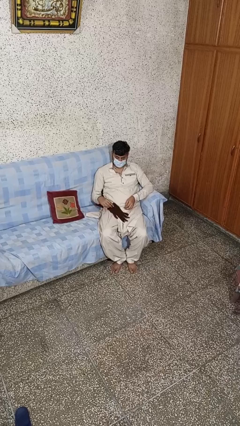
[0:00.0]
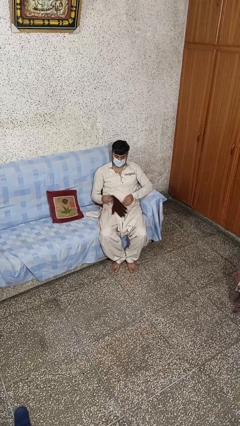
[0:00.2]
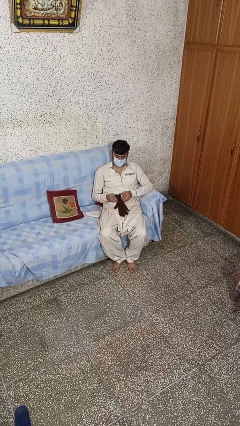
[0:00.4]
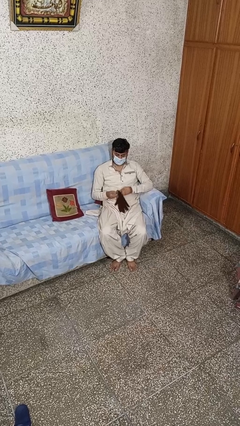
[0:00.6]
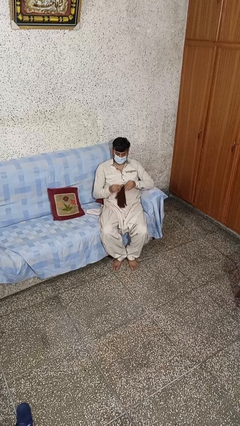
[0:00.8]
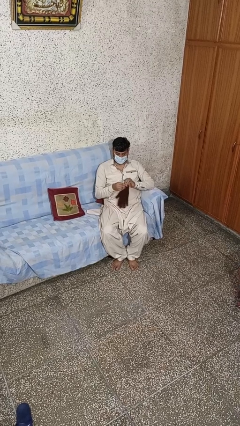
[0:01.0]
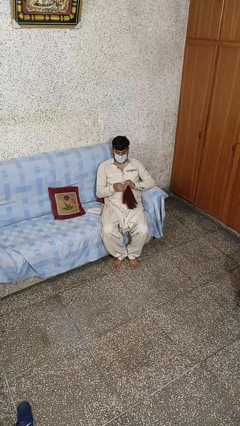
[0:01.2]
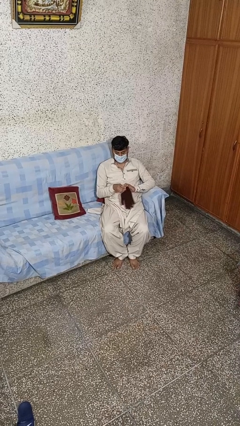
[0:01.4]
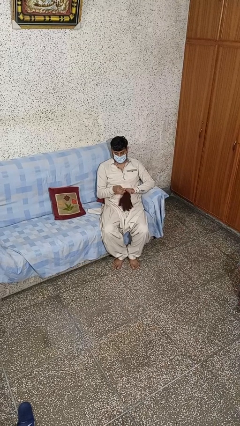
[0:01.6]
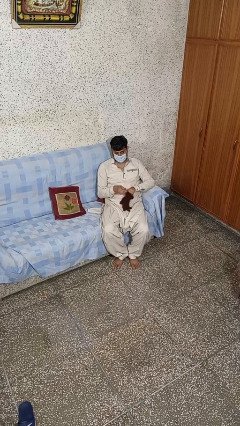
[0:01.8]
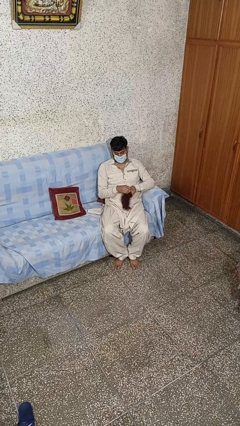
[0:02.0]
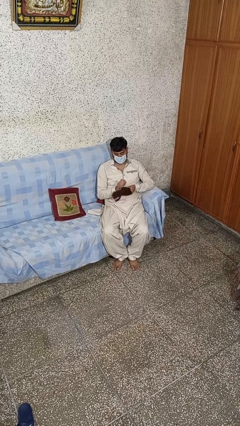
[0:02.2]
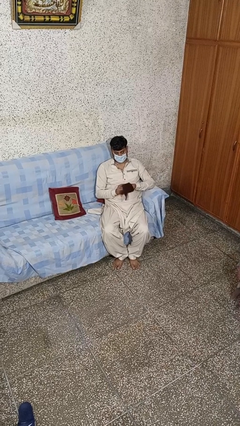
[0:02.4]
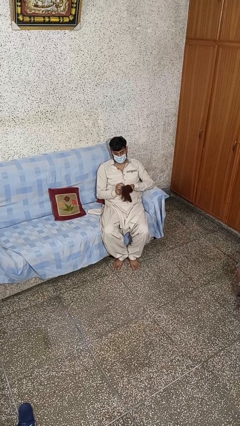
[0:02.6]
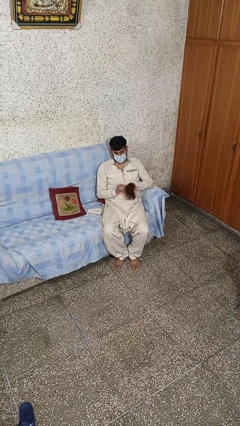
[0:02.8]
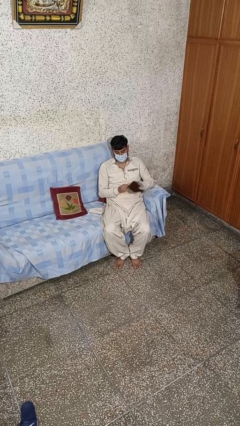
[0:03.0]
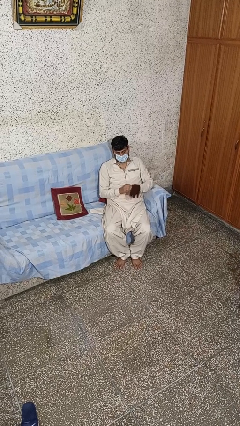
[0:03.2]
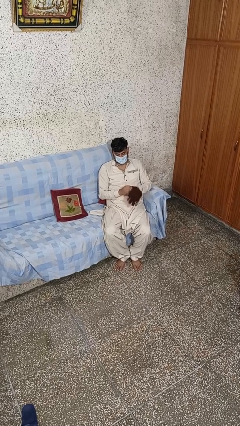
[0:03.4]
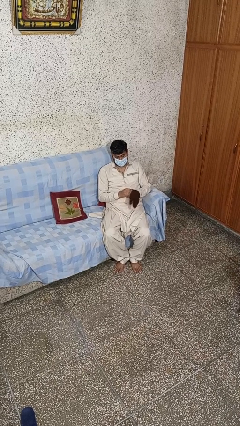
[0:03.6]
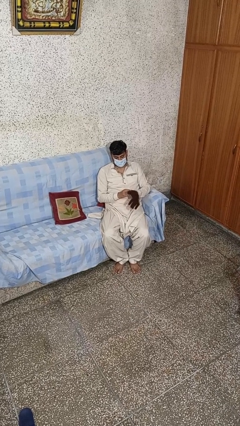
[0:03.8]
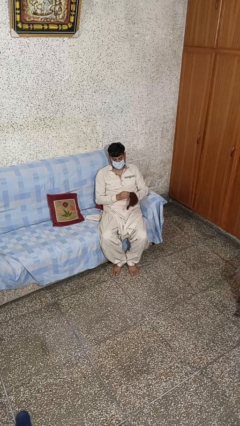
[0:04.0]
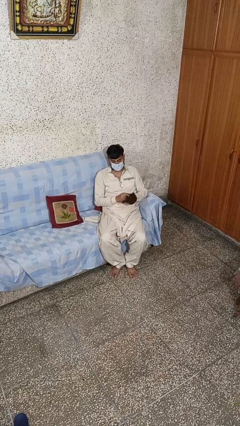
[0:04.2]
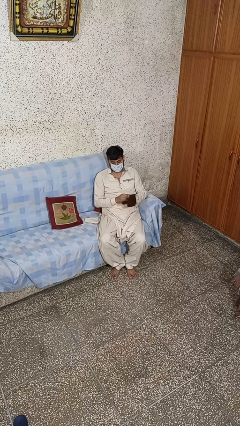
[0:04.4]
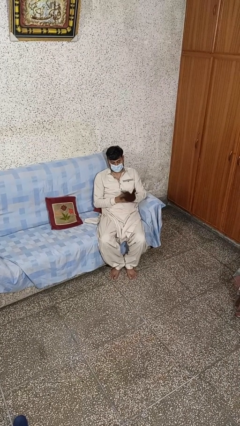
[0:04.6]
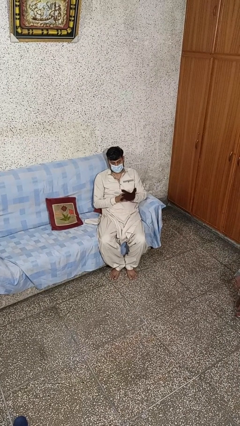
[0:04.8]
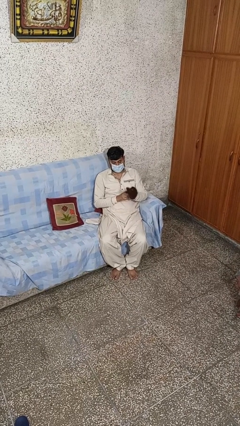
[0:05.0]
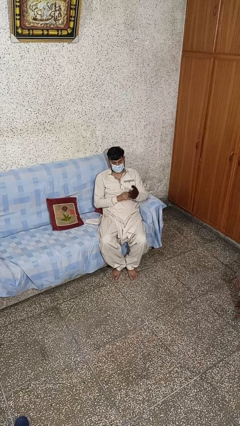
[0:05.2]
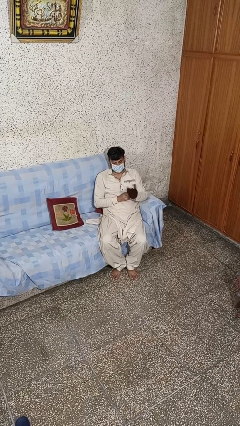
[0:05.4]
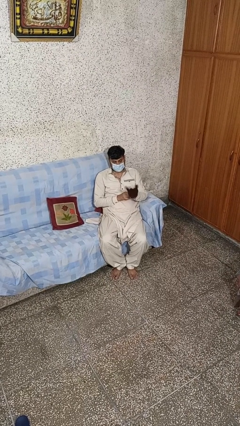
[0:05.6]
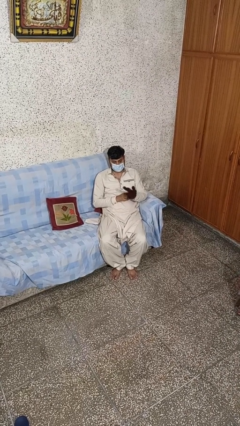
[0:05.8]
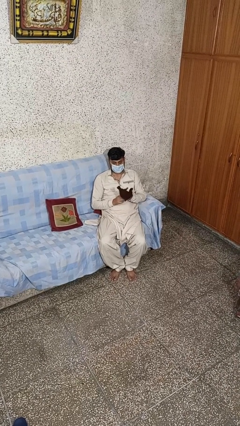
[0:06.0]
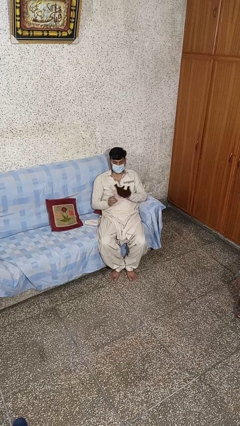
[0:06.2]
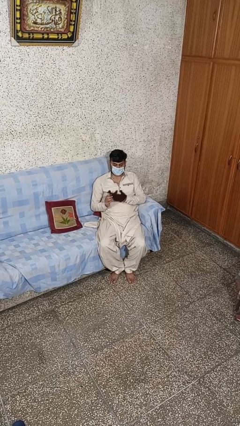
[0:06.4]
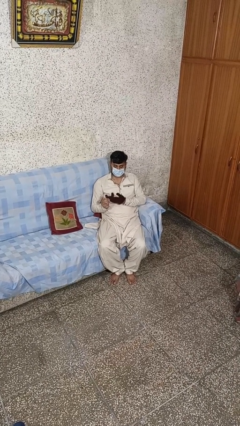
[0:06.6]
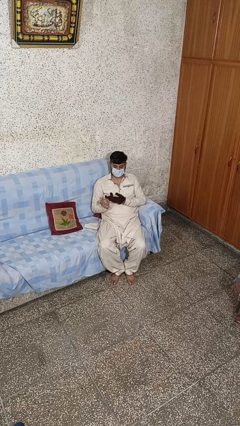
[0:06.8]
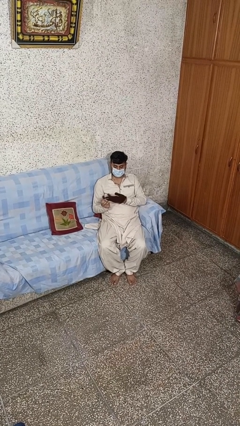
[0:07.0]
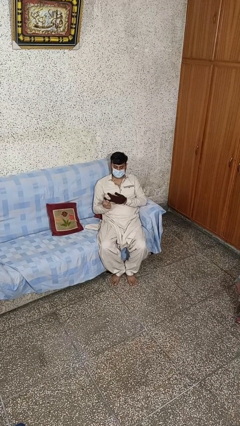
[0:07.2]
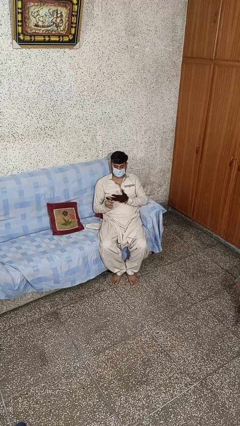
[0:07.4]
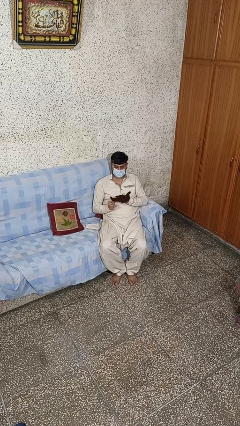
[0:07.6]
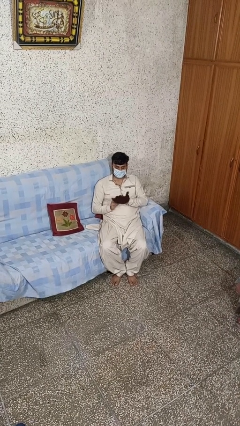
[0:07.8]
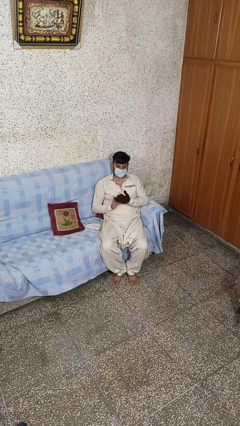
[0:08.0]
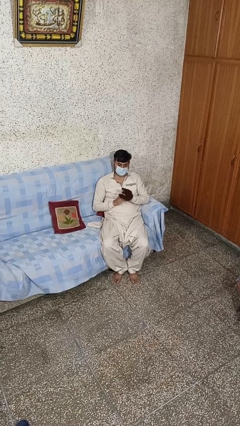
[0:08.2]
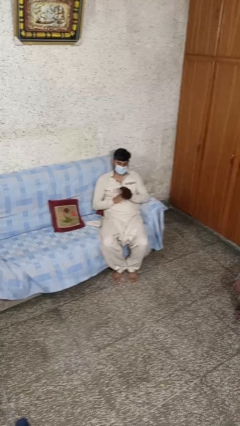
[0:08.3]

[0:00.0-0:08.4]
person puts on gloves

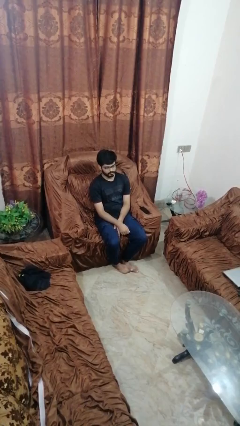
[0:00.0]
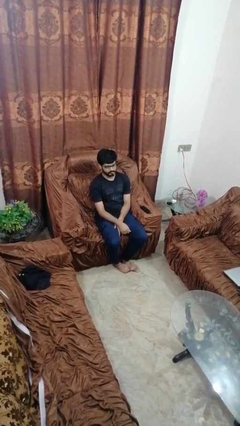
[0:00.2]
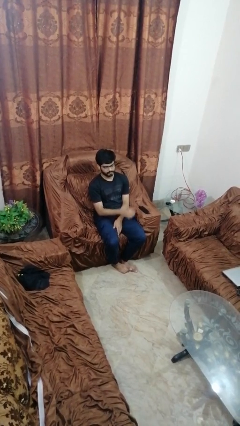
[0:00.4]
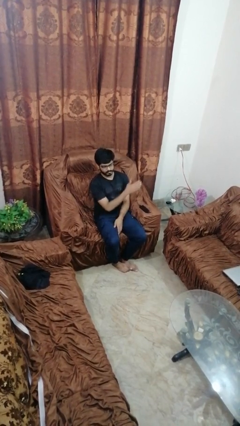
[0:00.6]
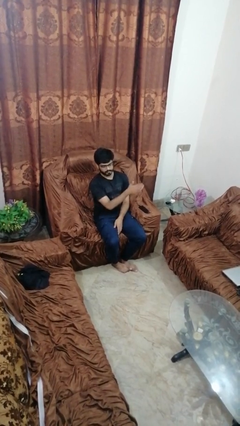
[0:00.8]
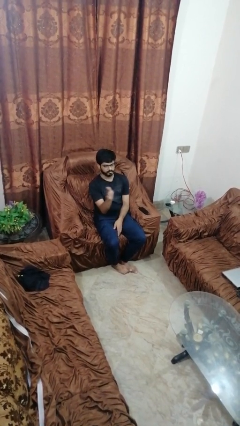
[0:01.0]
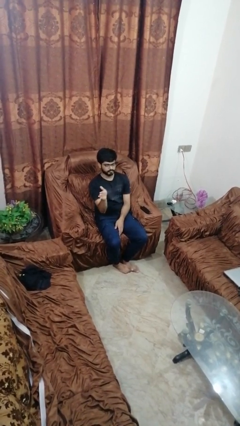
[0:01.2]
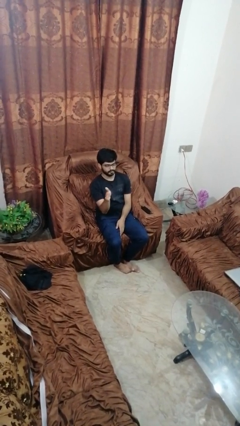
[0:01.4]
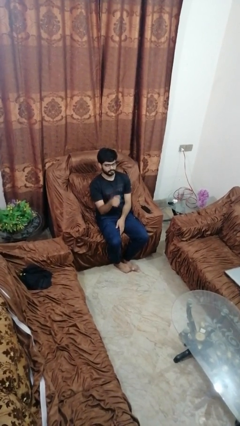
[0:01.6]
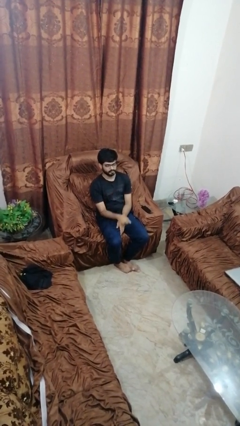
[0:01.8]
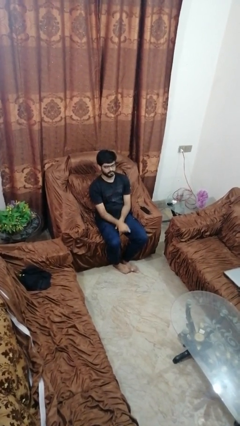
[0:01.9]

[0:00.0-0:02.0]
person gestures swipe right

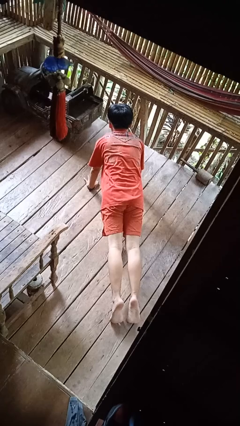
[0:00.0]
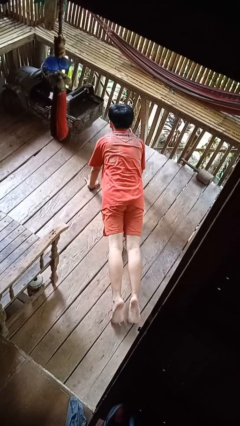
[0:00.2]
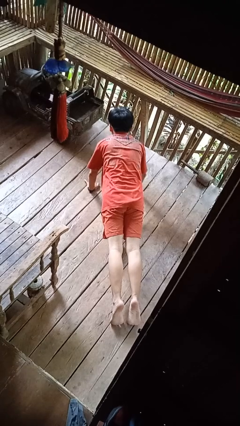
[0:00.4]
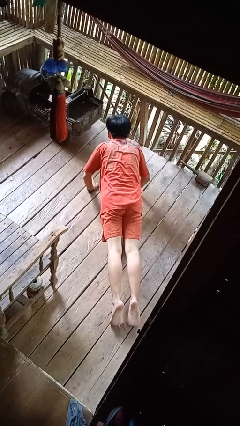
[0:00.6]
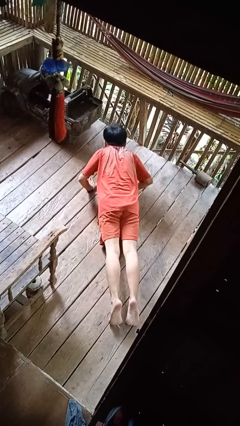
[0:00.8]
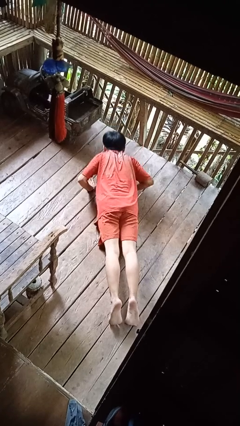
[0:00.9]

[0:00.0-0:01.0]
person exercises with pushup

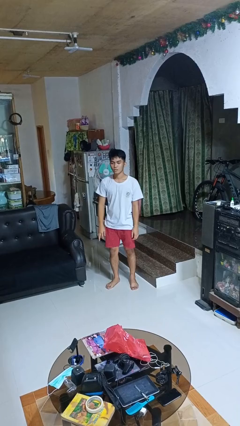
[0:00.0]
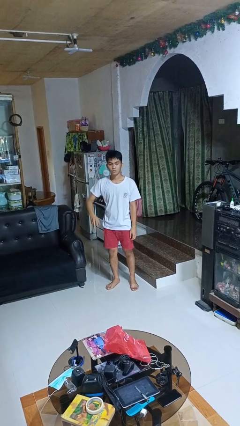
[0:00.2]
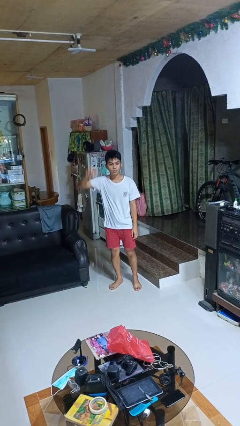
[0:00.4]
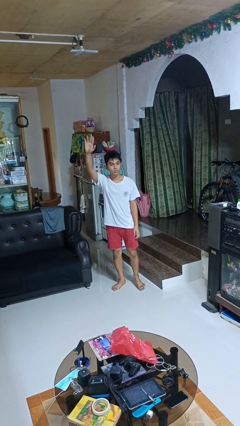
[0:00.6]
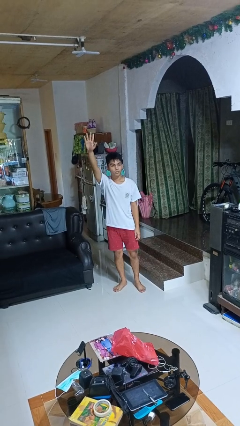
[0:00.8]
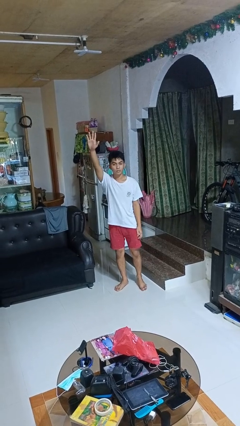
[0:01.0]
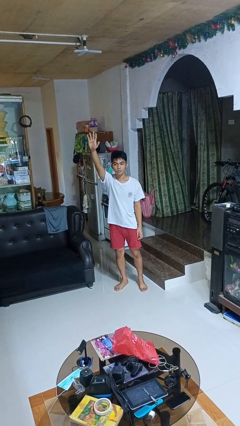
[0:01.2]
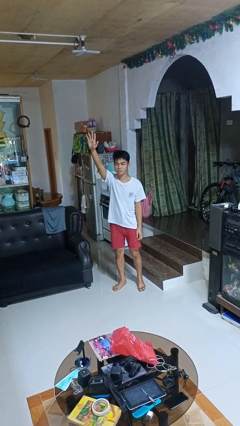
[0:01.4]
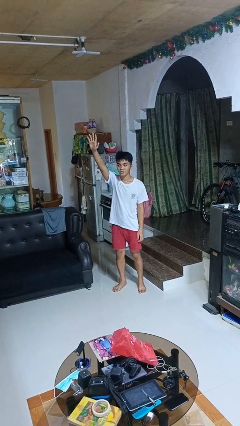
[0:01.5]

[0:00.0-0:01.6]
person gestures raise hand

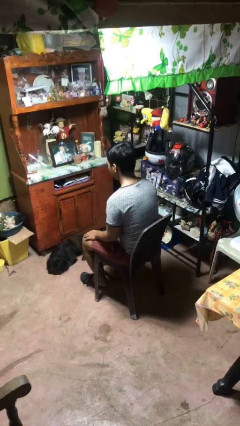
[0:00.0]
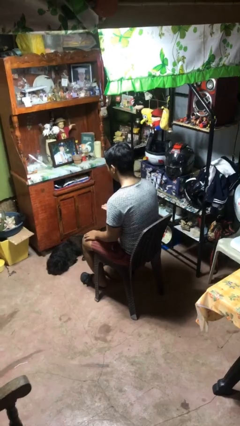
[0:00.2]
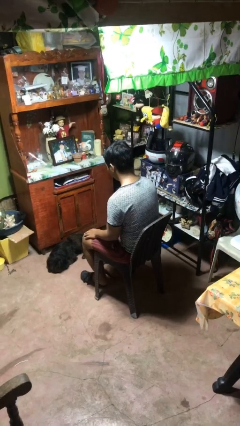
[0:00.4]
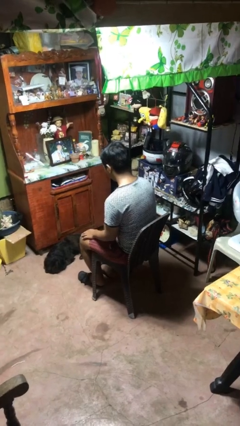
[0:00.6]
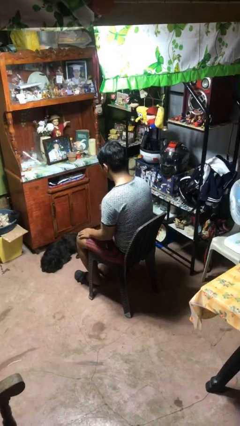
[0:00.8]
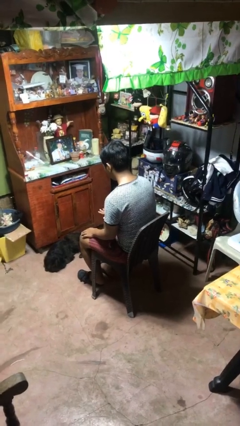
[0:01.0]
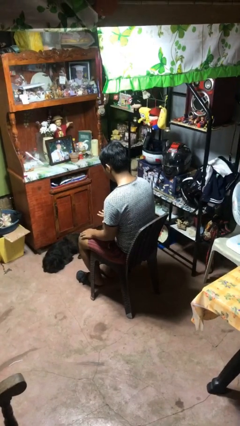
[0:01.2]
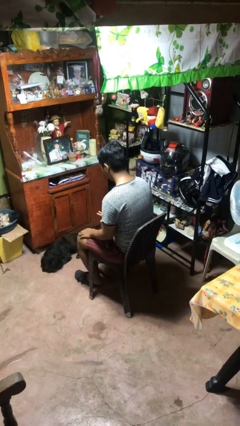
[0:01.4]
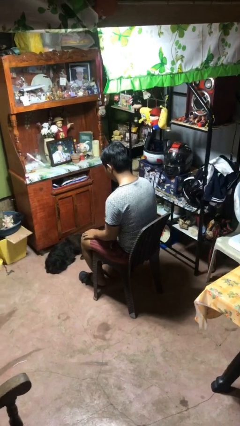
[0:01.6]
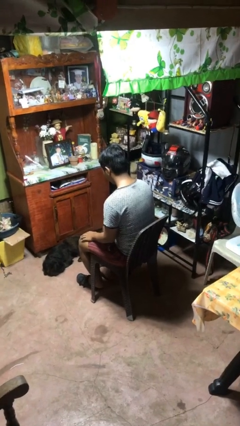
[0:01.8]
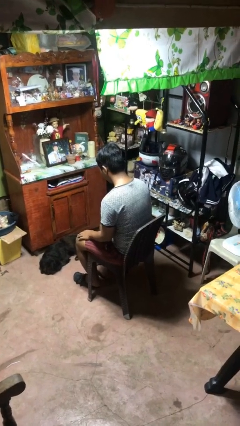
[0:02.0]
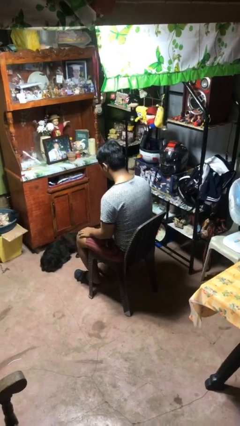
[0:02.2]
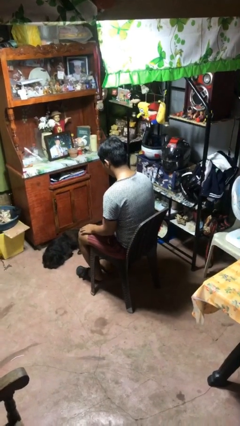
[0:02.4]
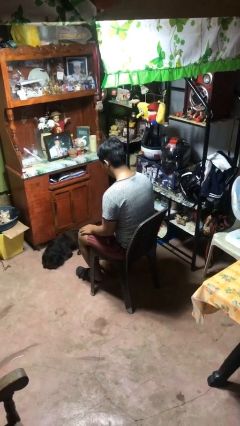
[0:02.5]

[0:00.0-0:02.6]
person looks at hands in lap

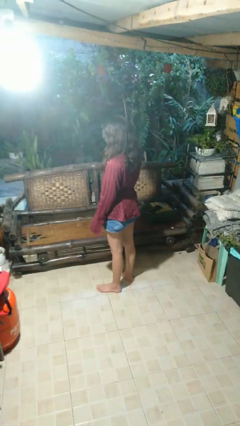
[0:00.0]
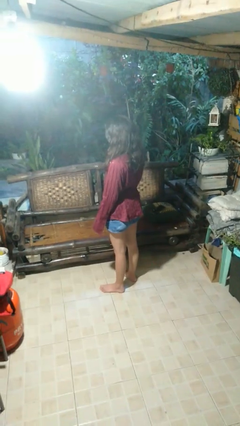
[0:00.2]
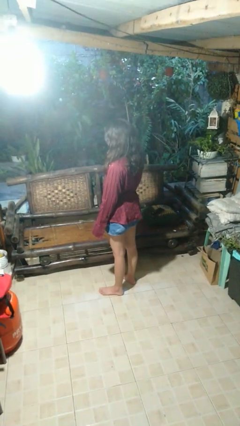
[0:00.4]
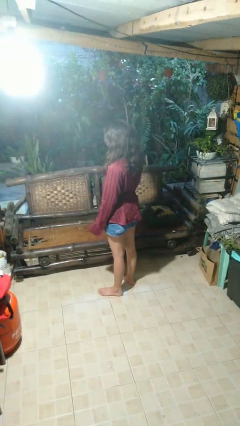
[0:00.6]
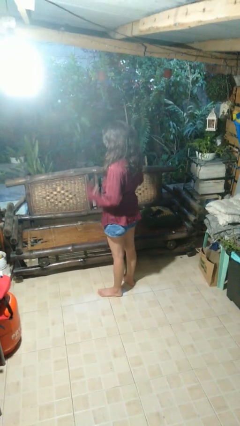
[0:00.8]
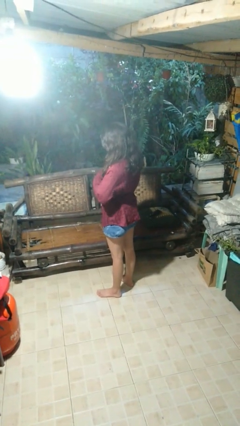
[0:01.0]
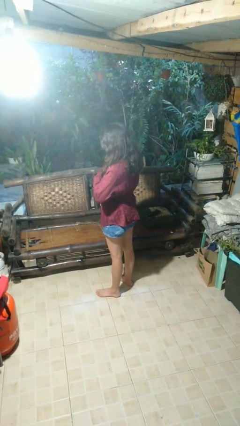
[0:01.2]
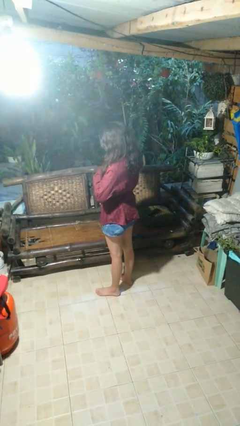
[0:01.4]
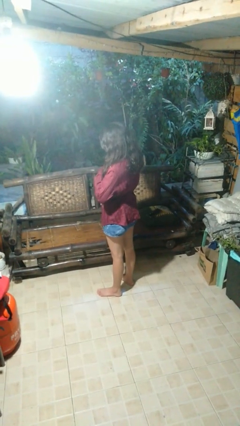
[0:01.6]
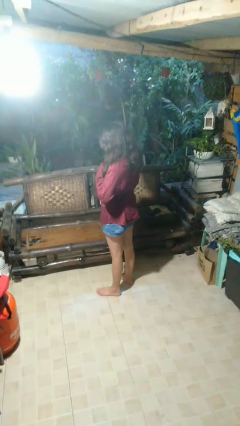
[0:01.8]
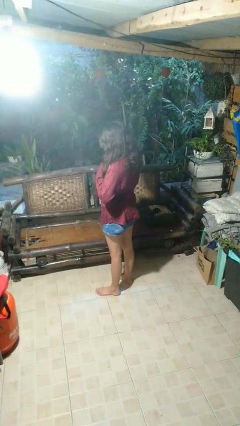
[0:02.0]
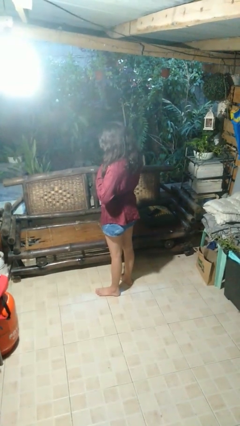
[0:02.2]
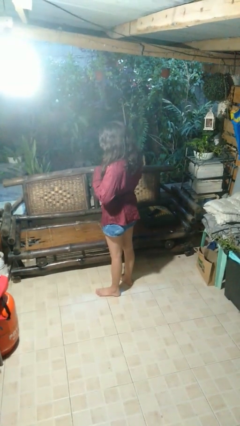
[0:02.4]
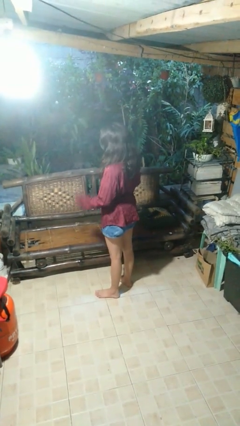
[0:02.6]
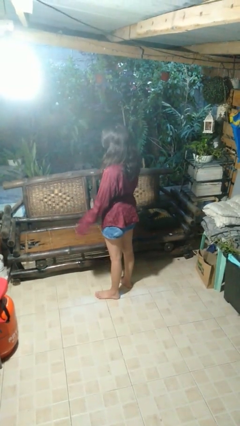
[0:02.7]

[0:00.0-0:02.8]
person buttons shirt
